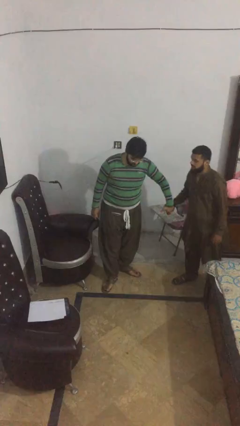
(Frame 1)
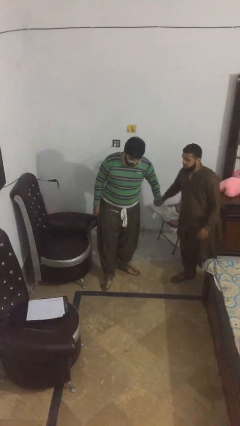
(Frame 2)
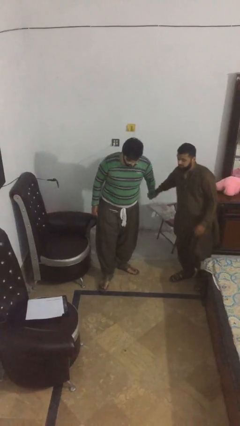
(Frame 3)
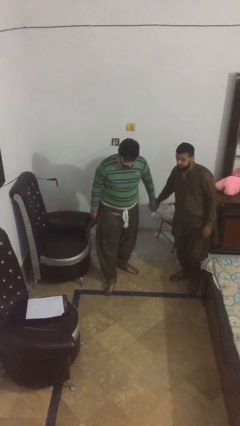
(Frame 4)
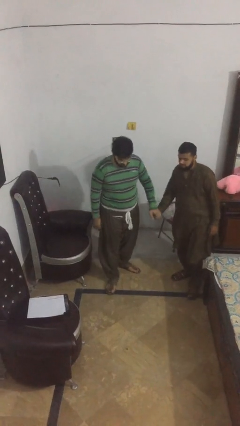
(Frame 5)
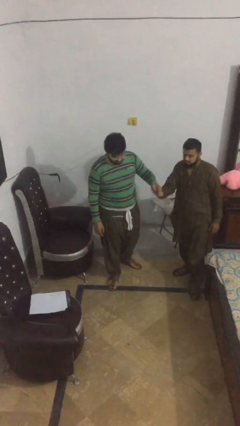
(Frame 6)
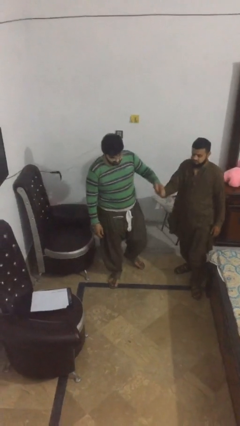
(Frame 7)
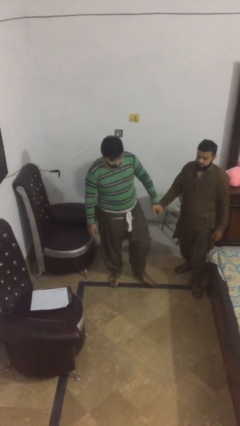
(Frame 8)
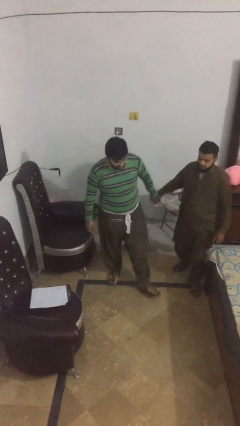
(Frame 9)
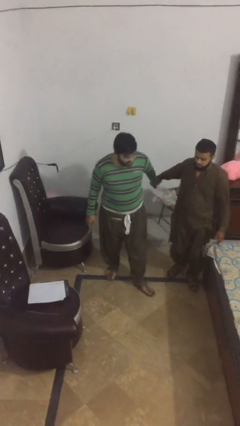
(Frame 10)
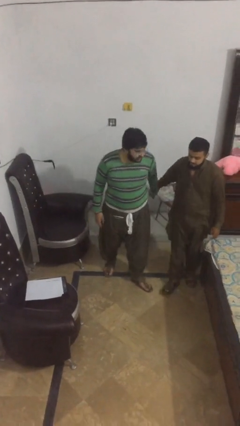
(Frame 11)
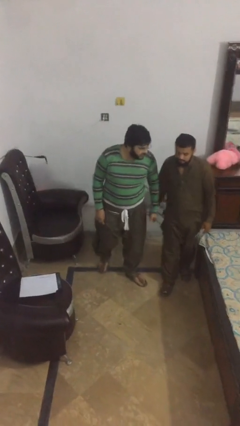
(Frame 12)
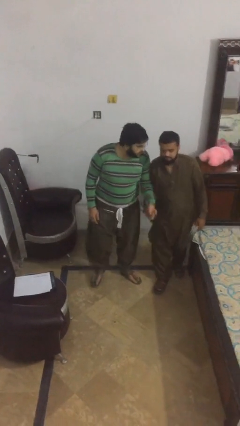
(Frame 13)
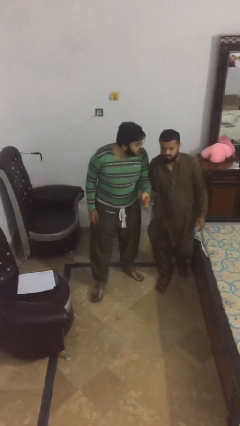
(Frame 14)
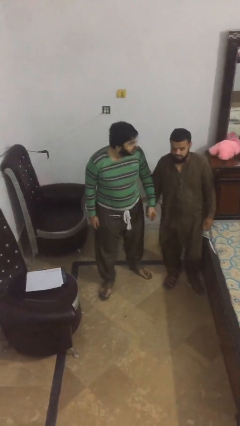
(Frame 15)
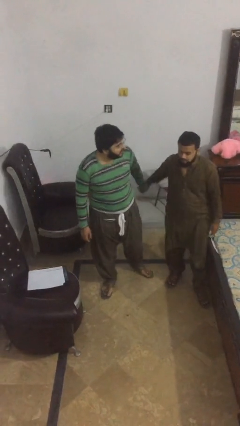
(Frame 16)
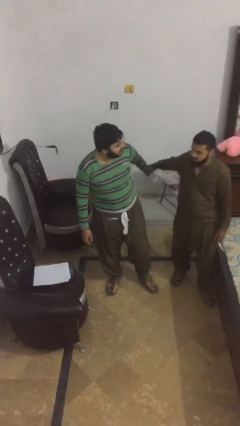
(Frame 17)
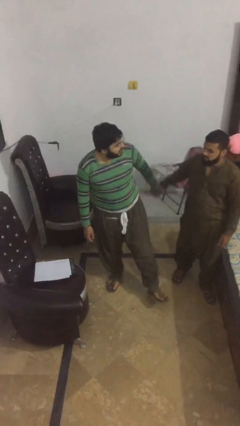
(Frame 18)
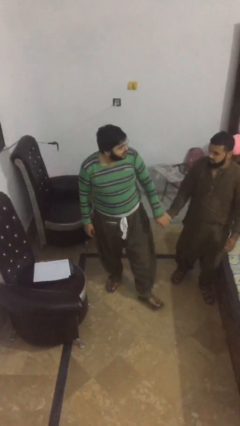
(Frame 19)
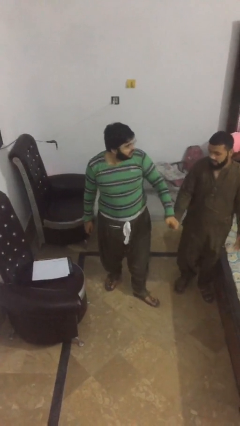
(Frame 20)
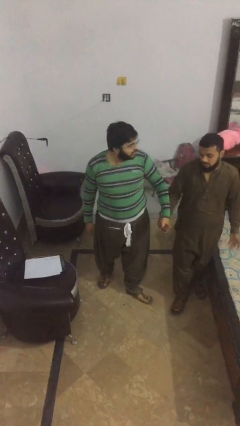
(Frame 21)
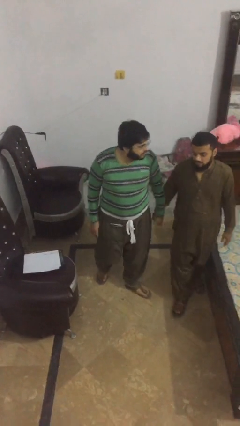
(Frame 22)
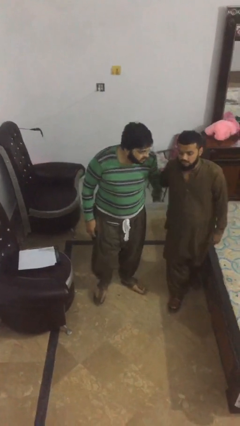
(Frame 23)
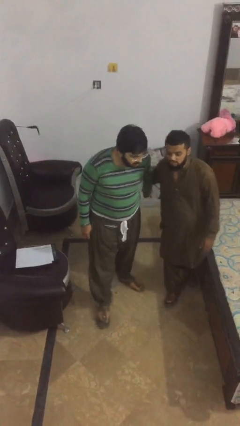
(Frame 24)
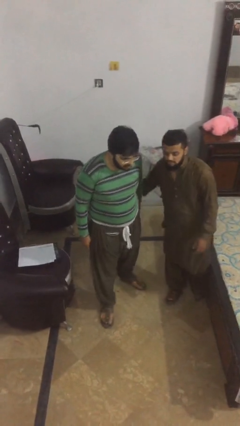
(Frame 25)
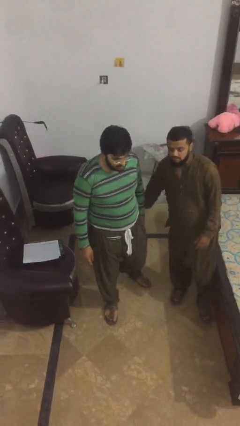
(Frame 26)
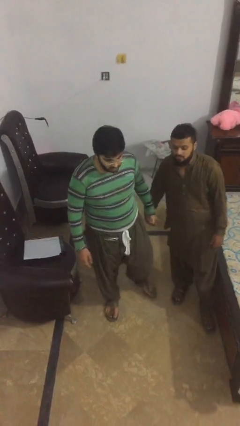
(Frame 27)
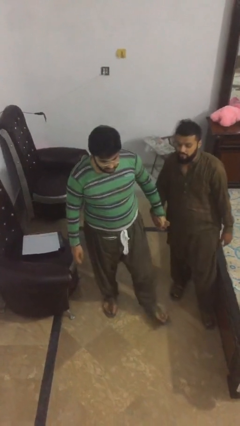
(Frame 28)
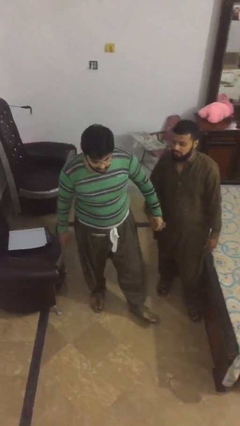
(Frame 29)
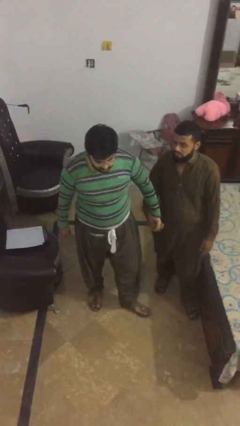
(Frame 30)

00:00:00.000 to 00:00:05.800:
person holds hand

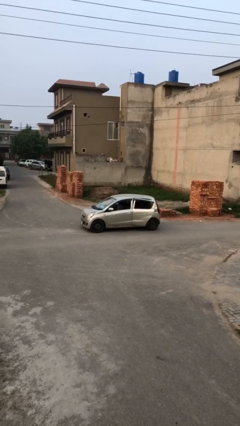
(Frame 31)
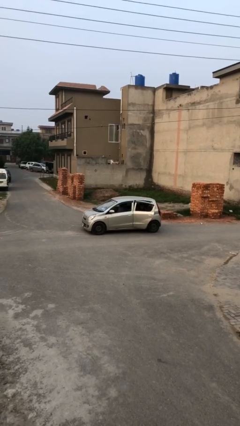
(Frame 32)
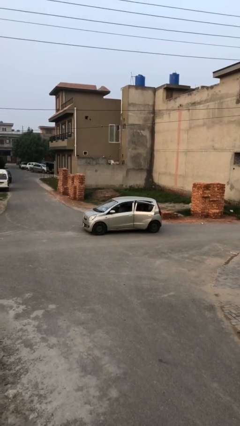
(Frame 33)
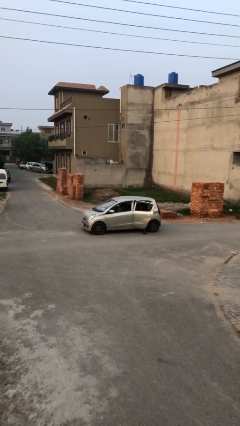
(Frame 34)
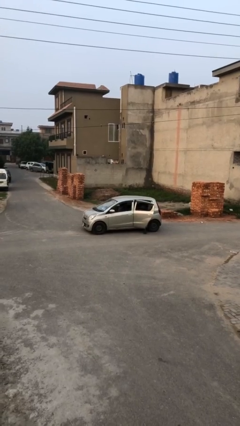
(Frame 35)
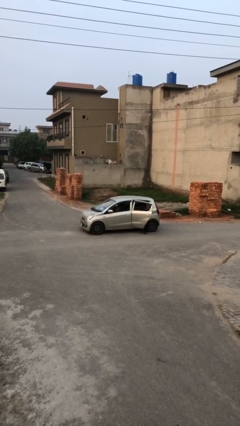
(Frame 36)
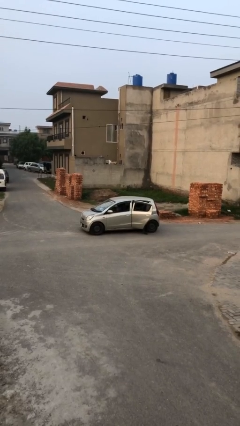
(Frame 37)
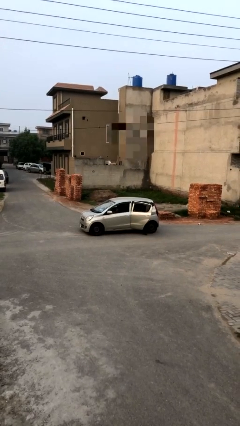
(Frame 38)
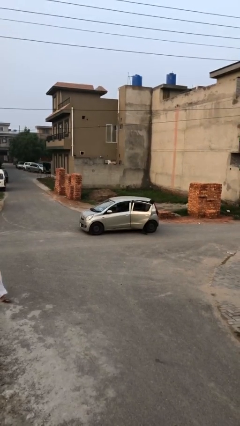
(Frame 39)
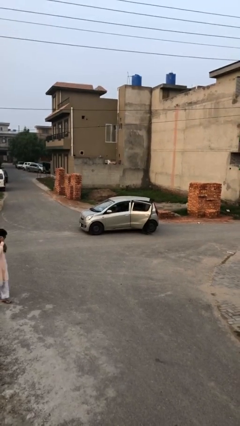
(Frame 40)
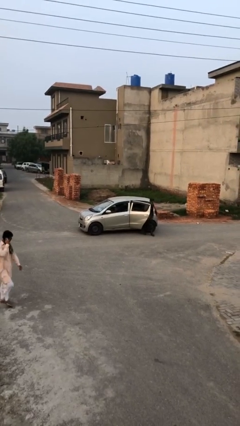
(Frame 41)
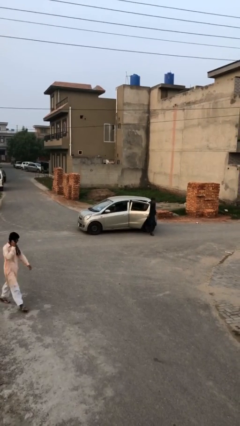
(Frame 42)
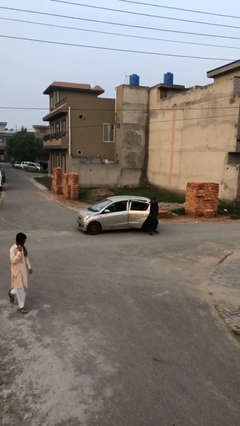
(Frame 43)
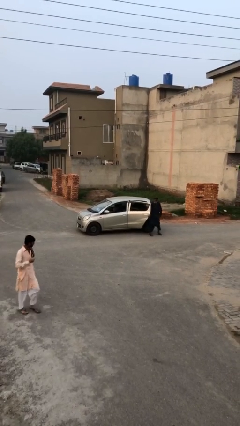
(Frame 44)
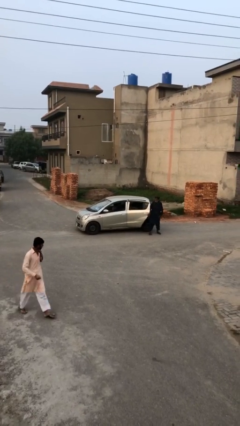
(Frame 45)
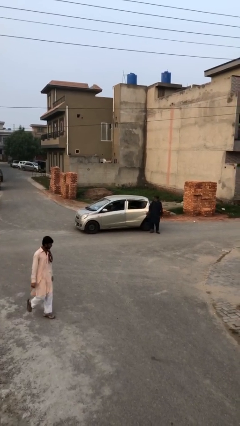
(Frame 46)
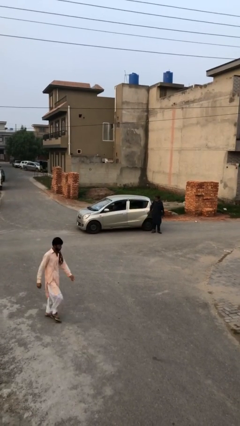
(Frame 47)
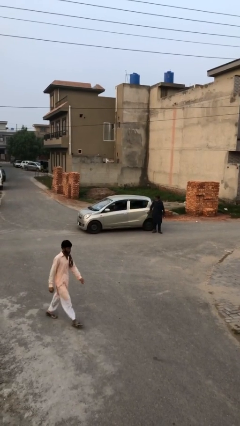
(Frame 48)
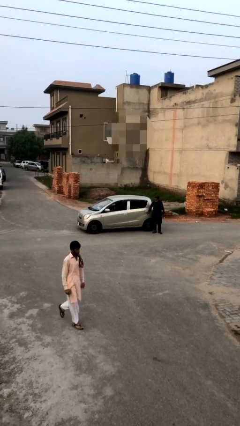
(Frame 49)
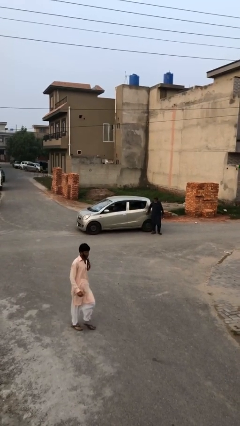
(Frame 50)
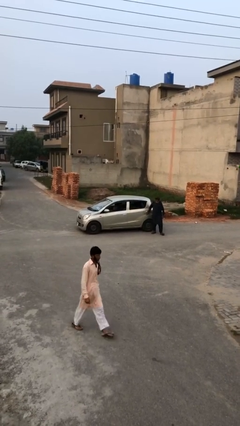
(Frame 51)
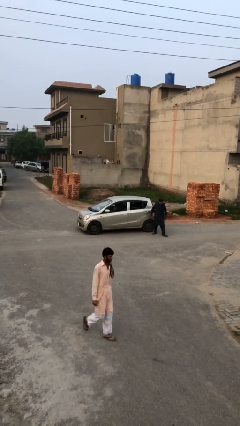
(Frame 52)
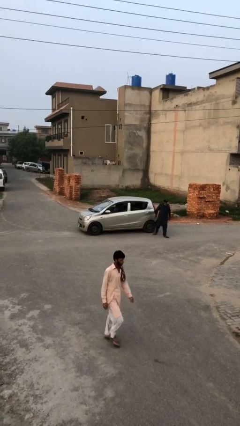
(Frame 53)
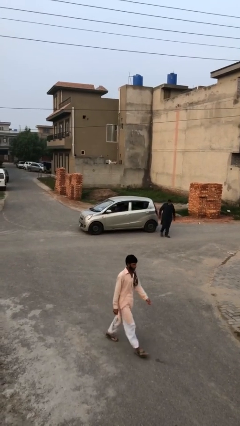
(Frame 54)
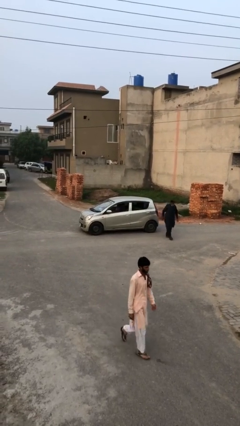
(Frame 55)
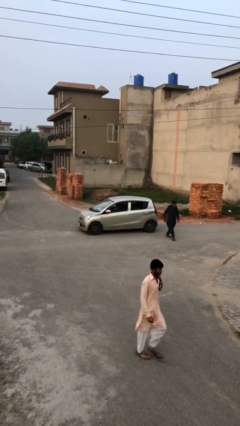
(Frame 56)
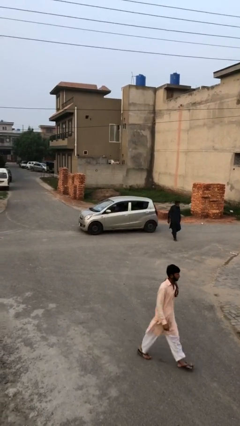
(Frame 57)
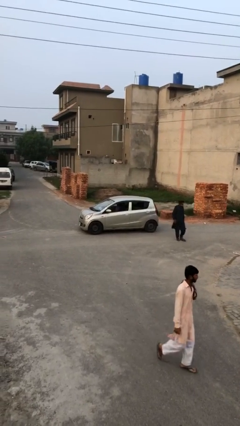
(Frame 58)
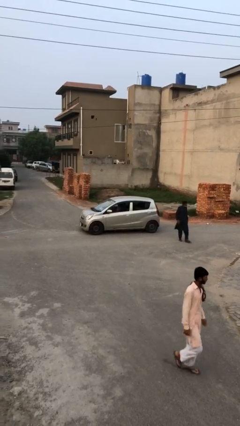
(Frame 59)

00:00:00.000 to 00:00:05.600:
car drops off person

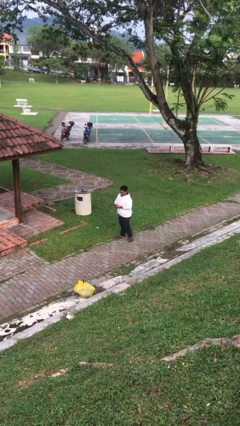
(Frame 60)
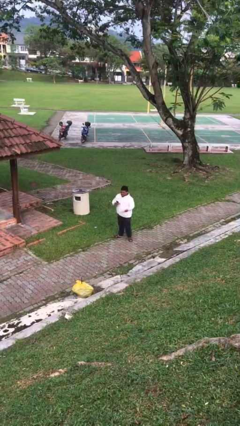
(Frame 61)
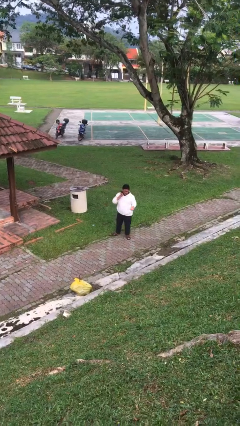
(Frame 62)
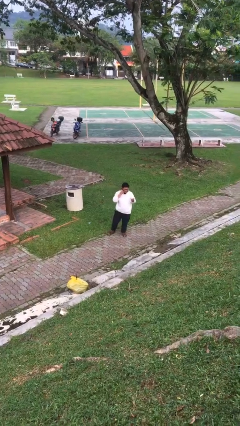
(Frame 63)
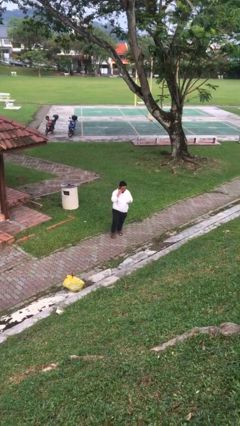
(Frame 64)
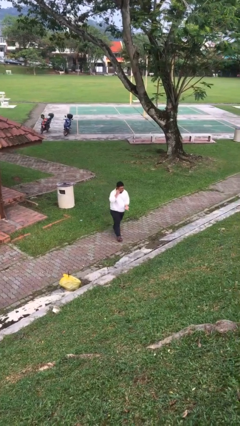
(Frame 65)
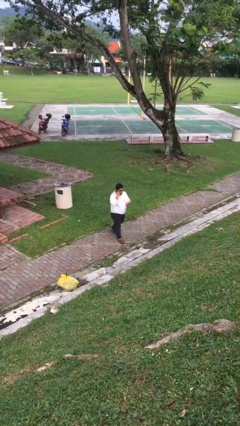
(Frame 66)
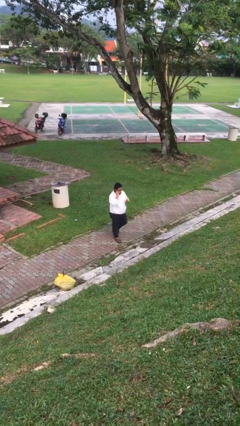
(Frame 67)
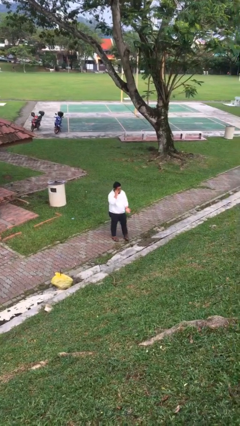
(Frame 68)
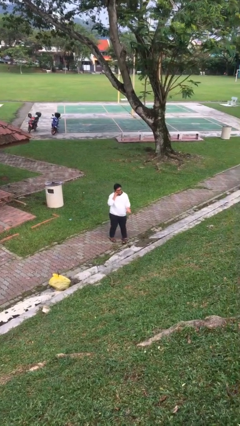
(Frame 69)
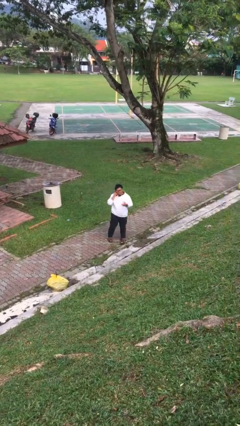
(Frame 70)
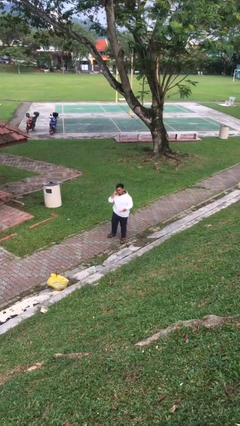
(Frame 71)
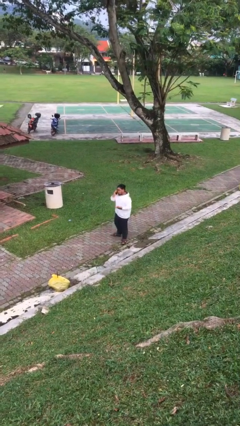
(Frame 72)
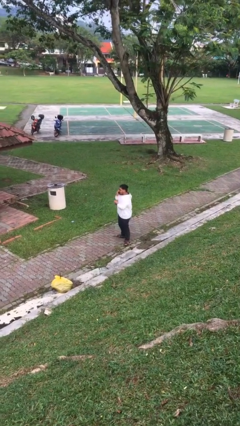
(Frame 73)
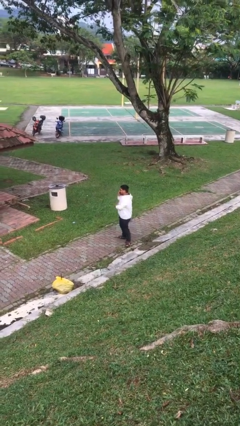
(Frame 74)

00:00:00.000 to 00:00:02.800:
person talks on phone

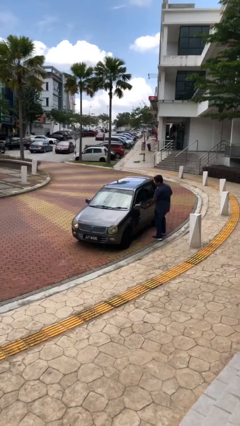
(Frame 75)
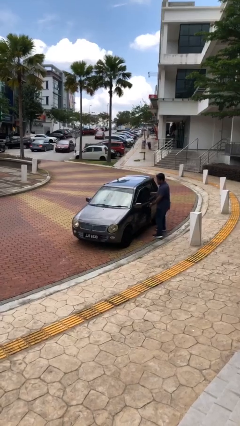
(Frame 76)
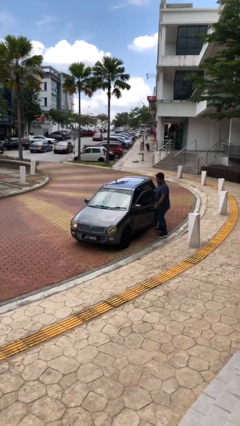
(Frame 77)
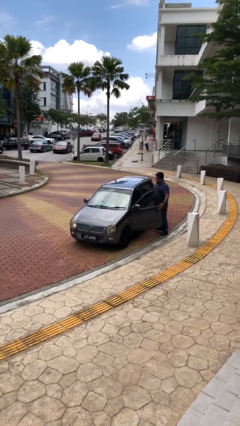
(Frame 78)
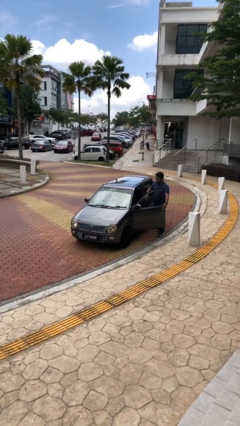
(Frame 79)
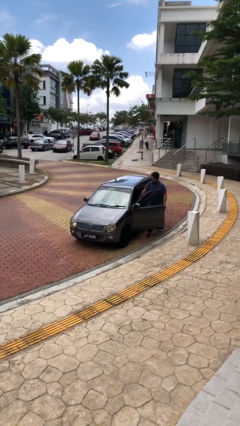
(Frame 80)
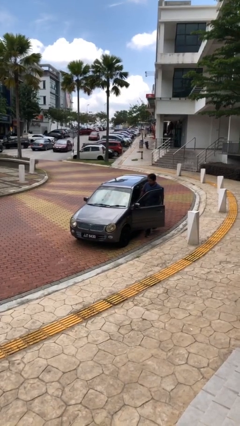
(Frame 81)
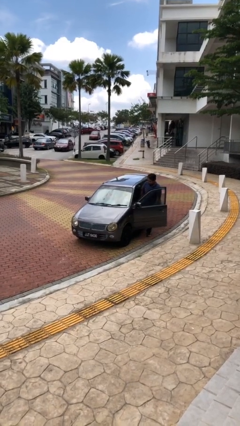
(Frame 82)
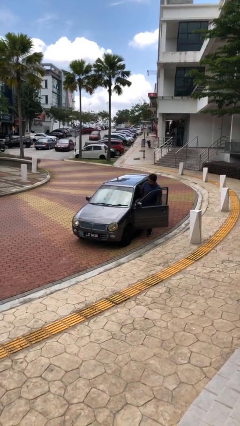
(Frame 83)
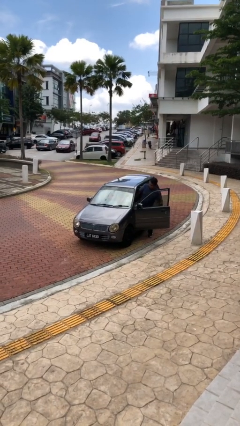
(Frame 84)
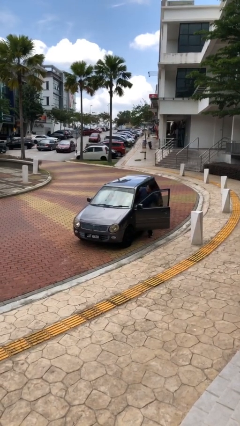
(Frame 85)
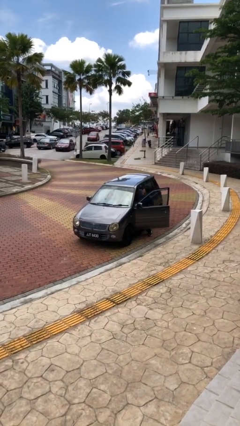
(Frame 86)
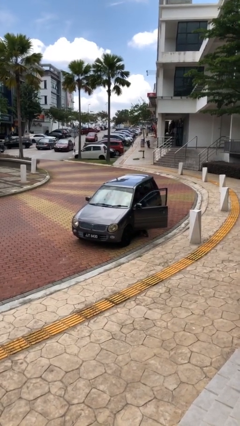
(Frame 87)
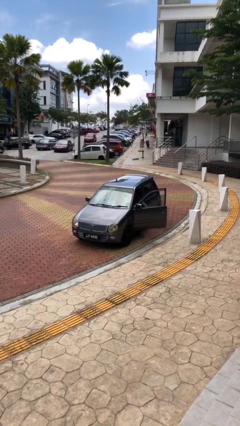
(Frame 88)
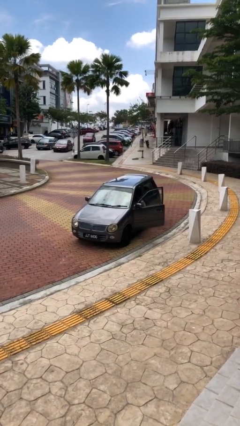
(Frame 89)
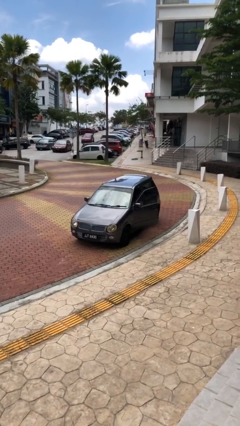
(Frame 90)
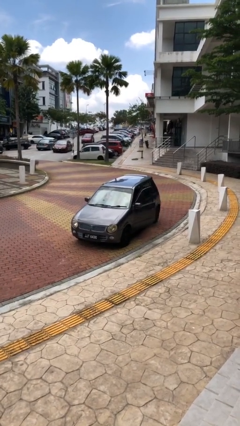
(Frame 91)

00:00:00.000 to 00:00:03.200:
car picks up person

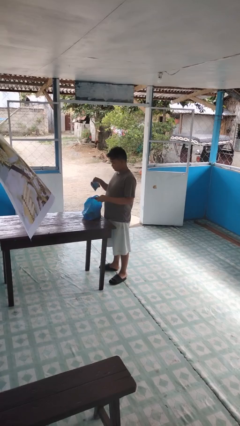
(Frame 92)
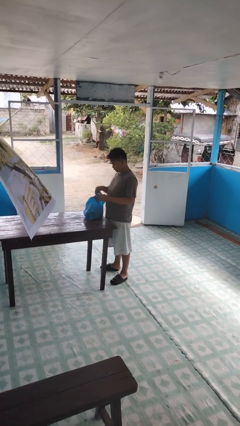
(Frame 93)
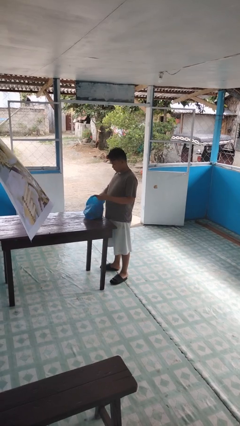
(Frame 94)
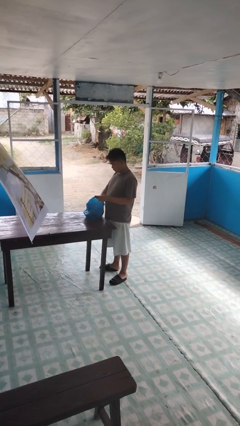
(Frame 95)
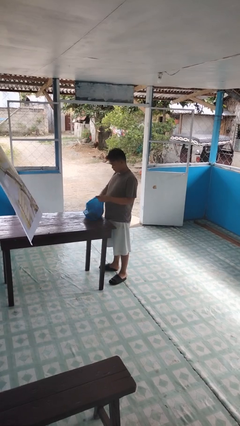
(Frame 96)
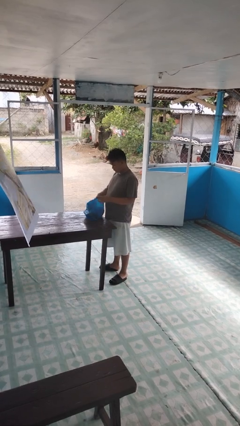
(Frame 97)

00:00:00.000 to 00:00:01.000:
person puts object into bag
